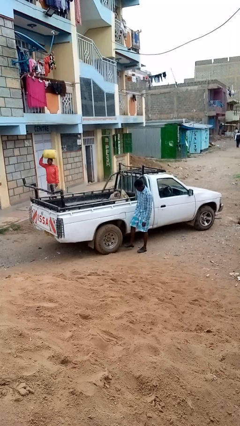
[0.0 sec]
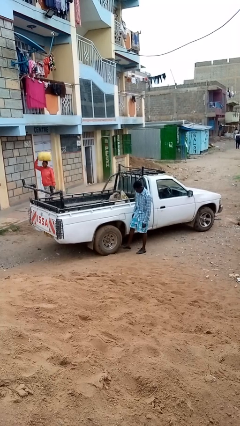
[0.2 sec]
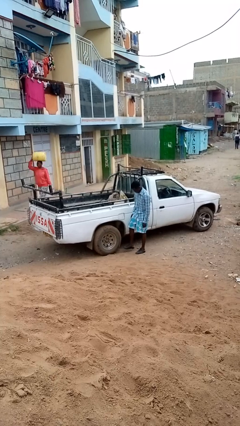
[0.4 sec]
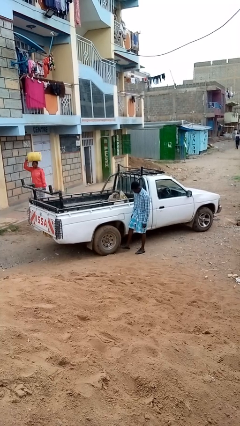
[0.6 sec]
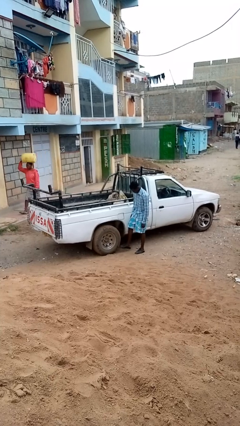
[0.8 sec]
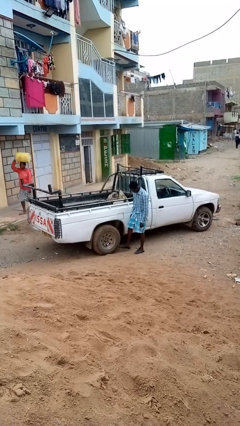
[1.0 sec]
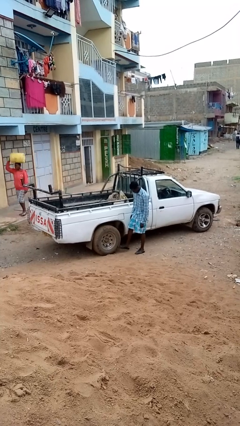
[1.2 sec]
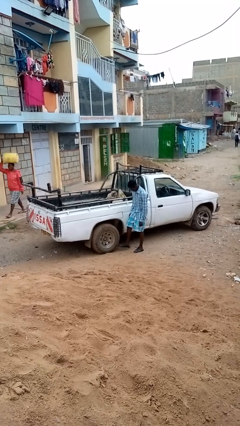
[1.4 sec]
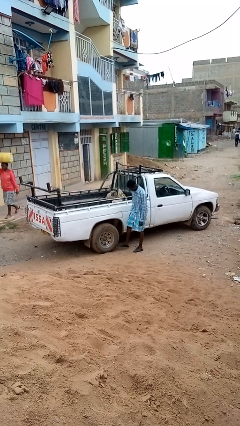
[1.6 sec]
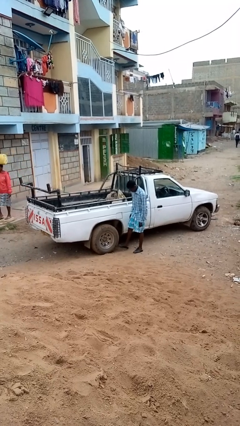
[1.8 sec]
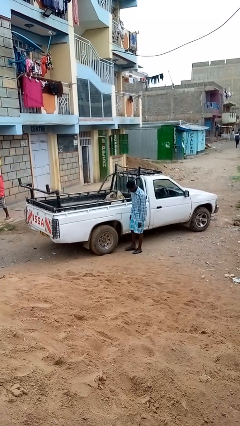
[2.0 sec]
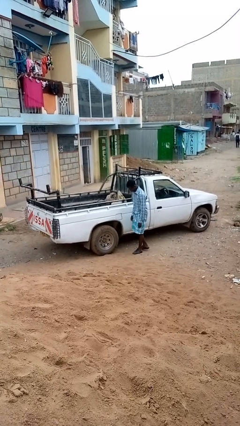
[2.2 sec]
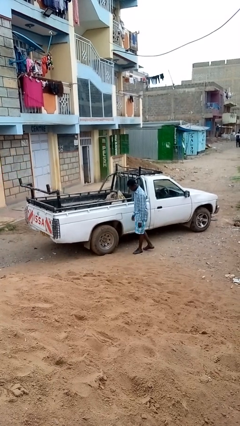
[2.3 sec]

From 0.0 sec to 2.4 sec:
person kicks car tires

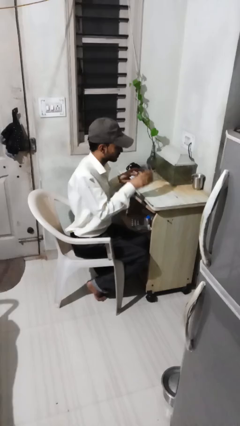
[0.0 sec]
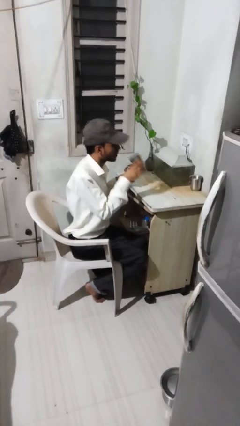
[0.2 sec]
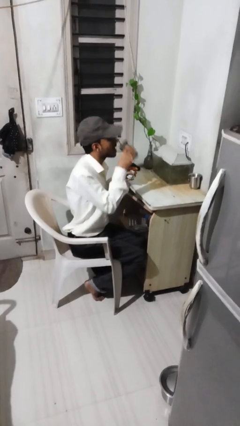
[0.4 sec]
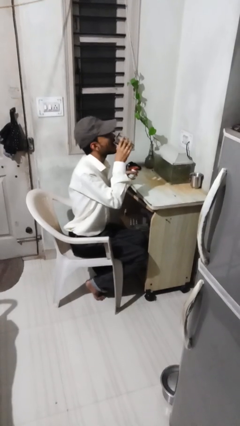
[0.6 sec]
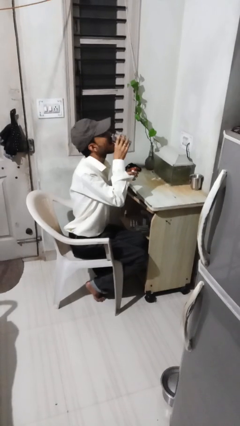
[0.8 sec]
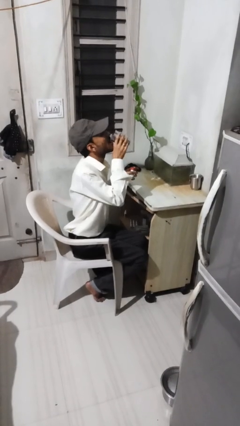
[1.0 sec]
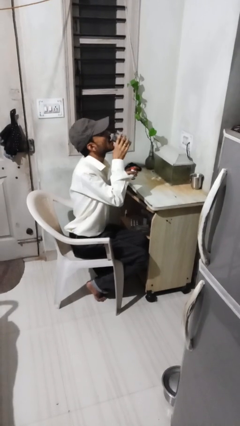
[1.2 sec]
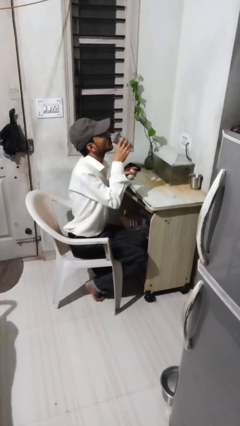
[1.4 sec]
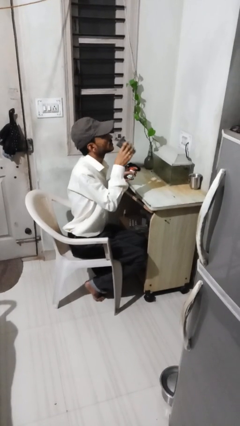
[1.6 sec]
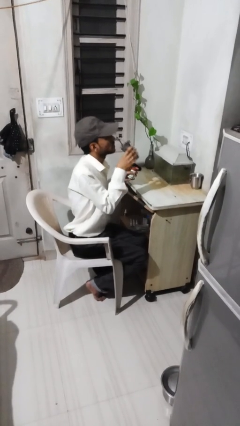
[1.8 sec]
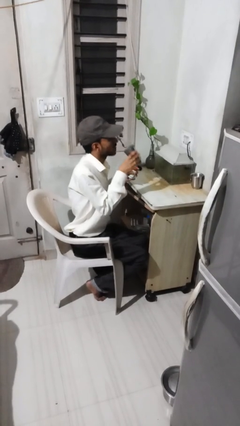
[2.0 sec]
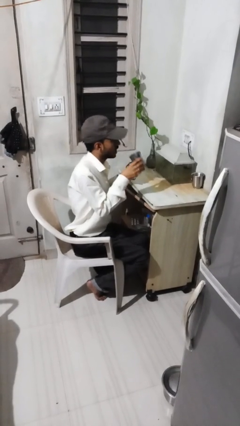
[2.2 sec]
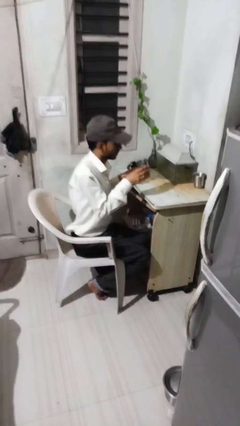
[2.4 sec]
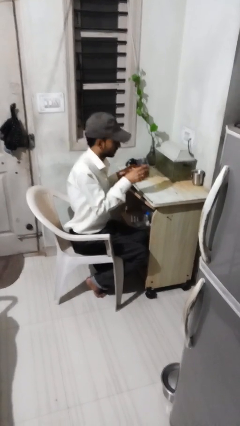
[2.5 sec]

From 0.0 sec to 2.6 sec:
person drinks from cup

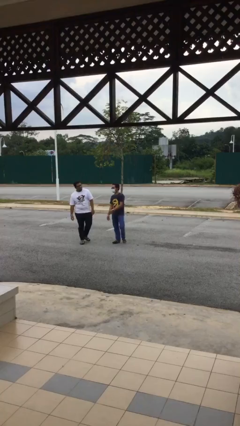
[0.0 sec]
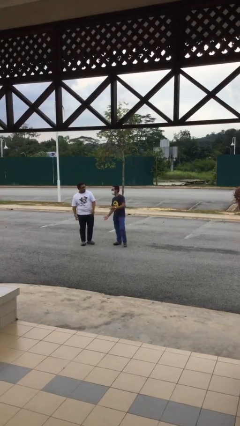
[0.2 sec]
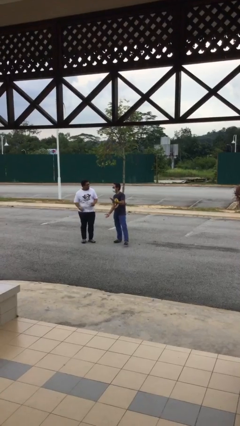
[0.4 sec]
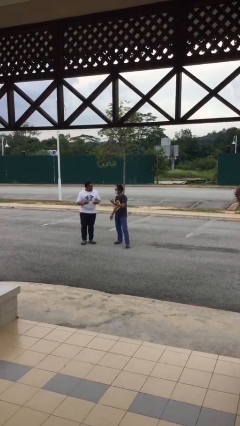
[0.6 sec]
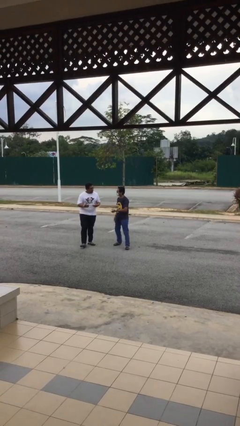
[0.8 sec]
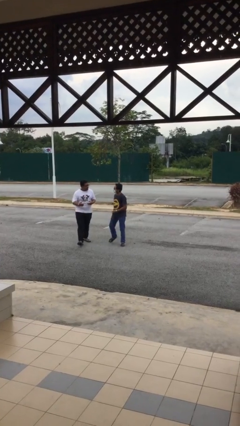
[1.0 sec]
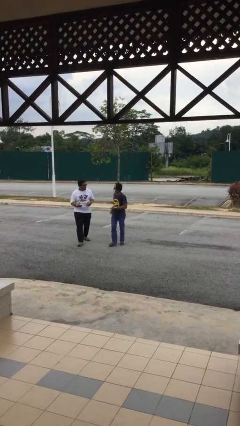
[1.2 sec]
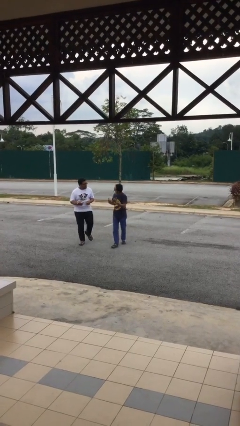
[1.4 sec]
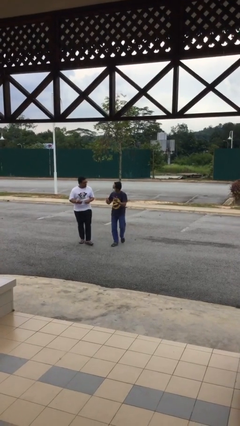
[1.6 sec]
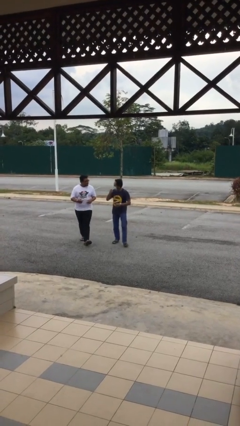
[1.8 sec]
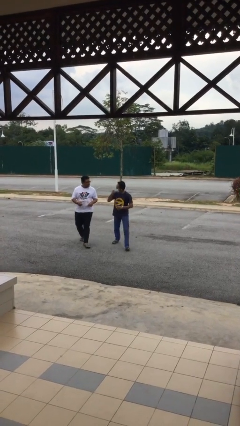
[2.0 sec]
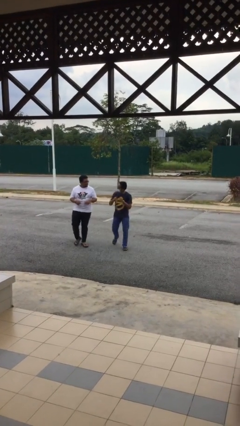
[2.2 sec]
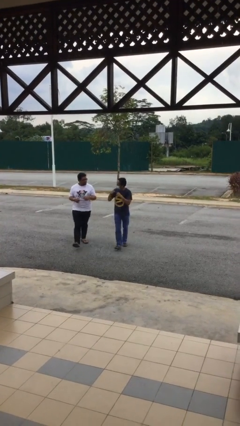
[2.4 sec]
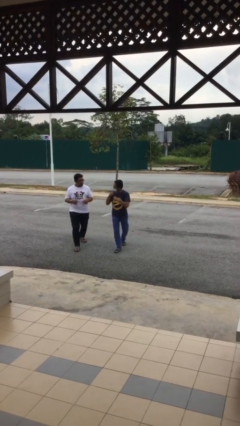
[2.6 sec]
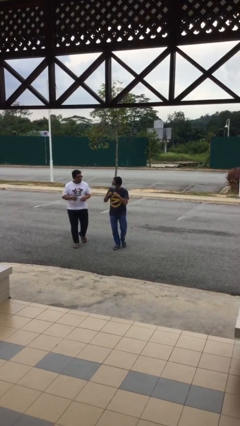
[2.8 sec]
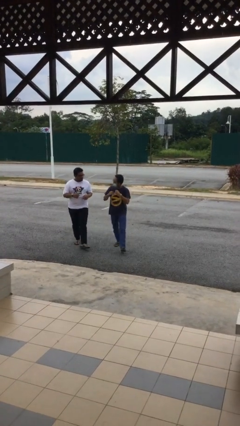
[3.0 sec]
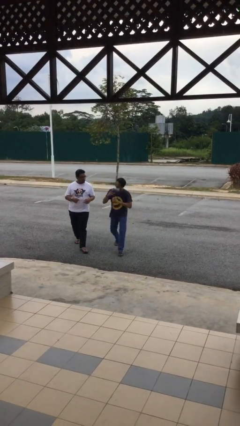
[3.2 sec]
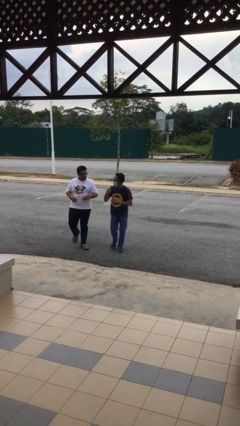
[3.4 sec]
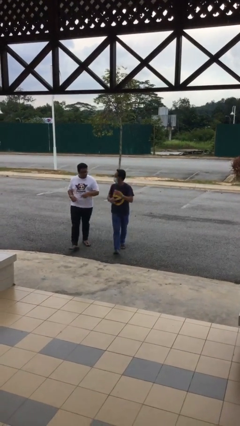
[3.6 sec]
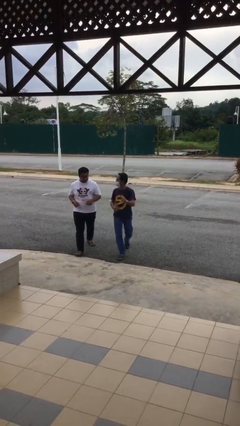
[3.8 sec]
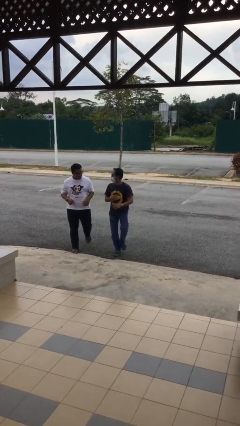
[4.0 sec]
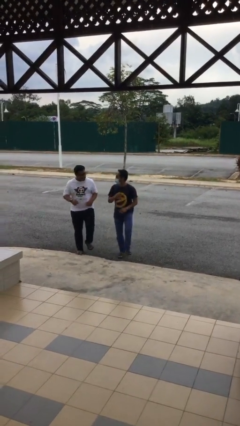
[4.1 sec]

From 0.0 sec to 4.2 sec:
person talks to person

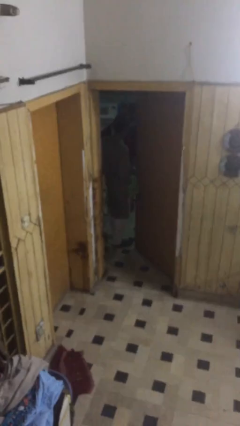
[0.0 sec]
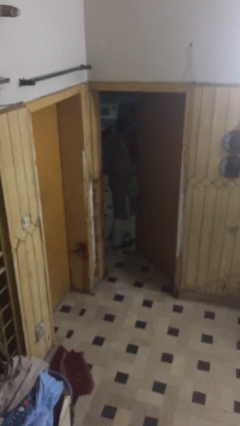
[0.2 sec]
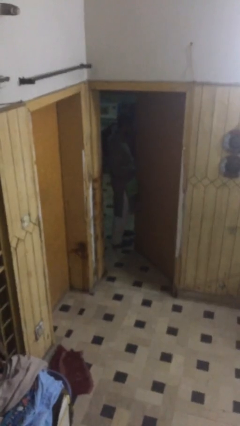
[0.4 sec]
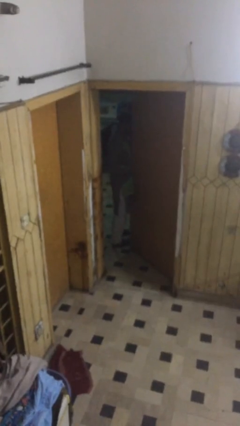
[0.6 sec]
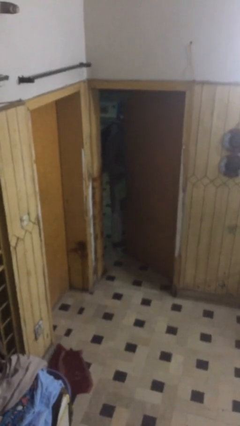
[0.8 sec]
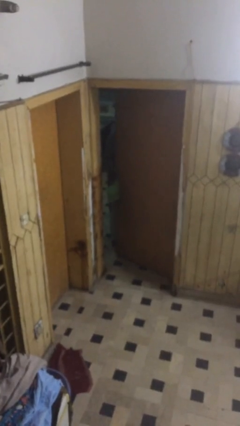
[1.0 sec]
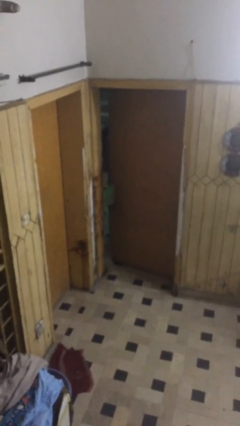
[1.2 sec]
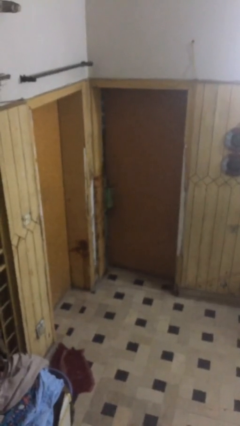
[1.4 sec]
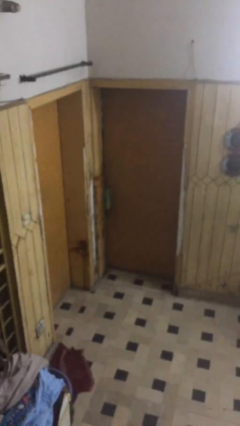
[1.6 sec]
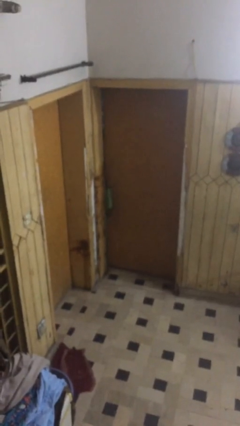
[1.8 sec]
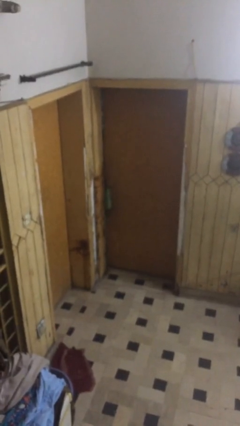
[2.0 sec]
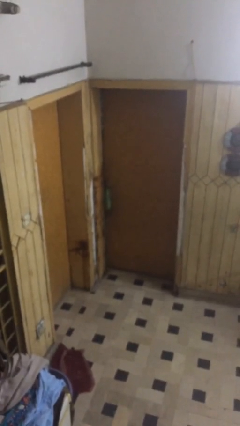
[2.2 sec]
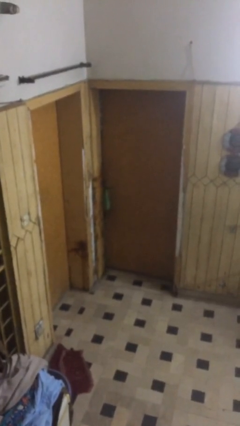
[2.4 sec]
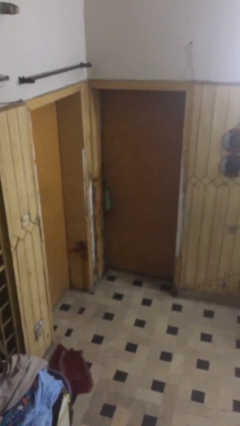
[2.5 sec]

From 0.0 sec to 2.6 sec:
person closes facility door

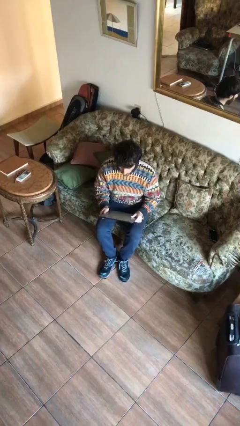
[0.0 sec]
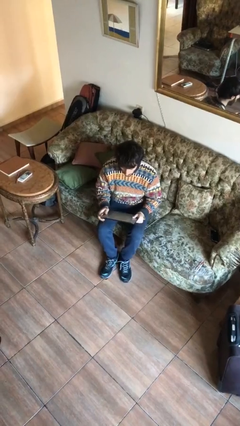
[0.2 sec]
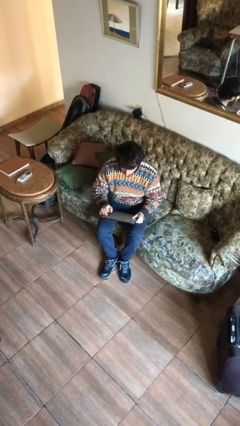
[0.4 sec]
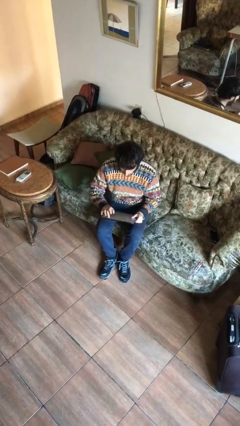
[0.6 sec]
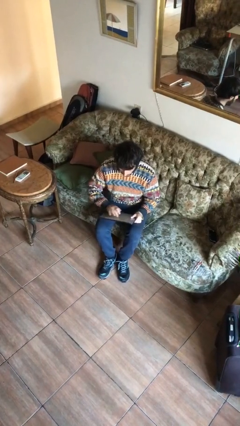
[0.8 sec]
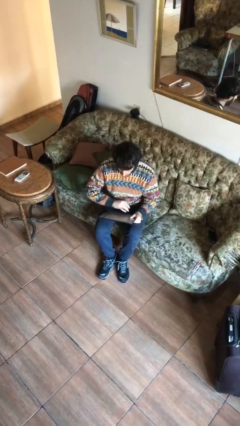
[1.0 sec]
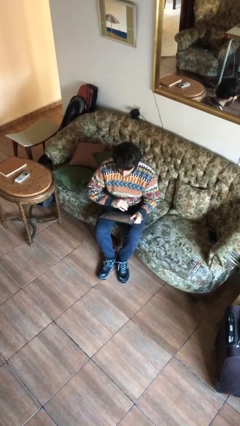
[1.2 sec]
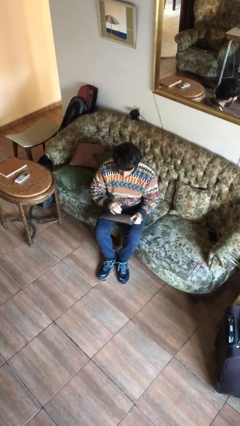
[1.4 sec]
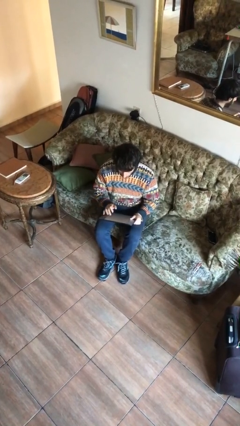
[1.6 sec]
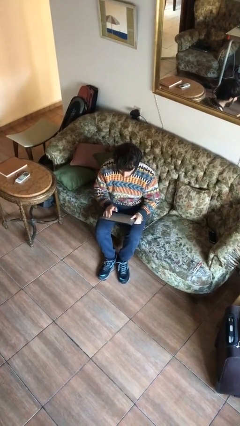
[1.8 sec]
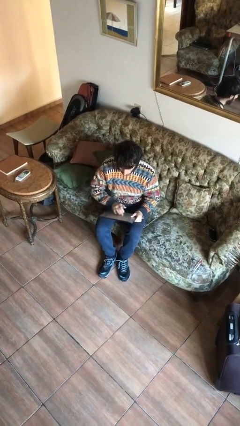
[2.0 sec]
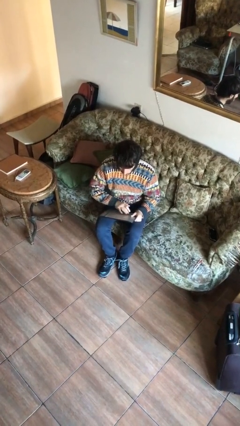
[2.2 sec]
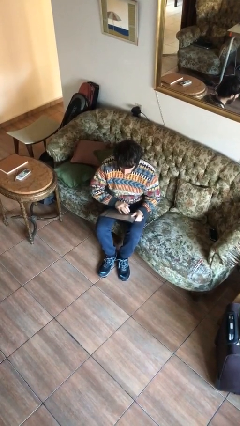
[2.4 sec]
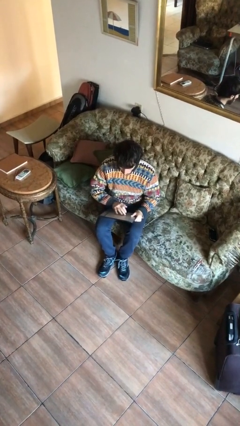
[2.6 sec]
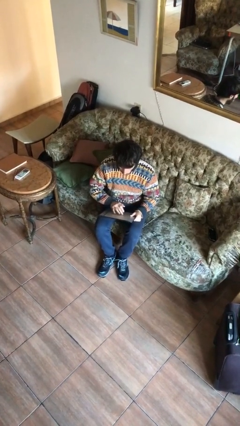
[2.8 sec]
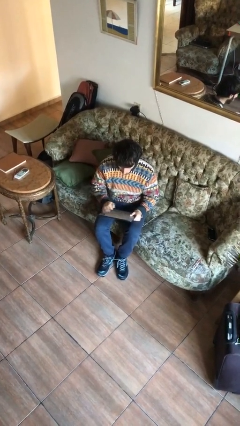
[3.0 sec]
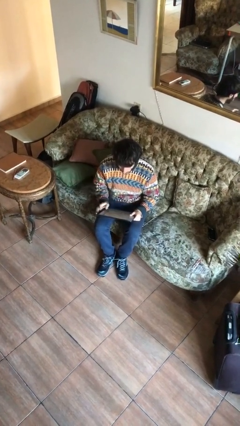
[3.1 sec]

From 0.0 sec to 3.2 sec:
person interacts with tablet

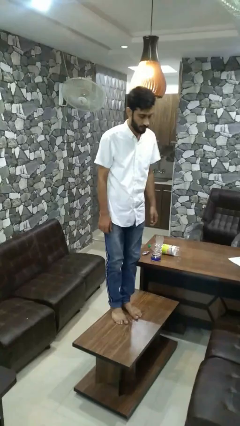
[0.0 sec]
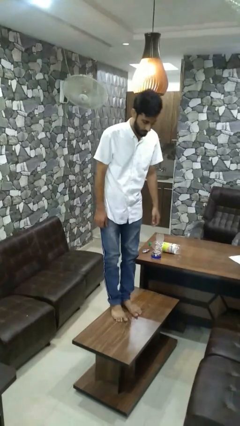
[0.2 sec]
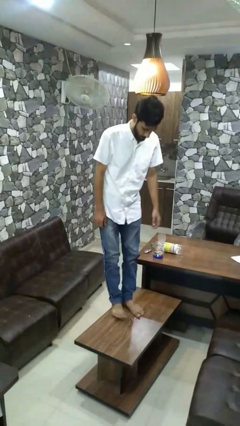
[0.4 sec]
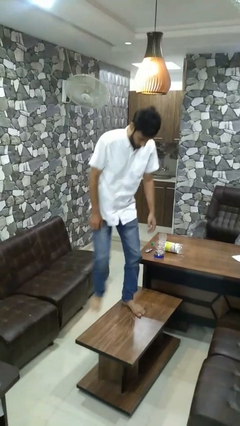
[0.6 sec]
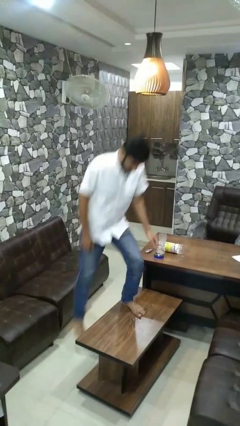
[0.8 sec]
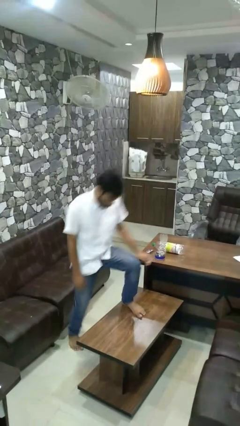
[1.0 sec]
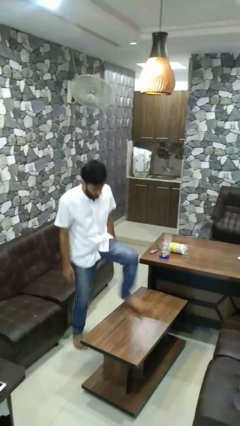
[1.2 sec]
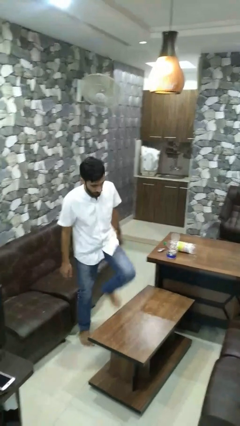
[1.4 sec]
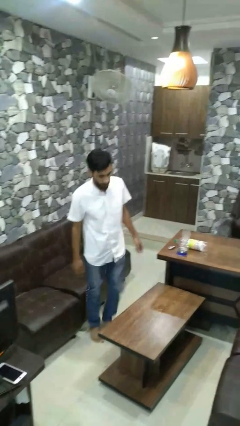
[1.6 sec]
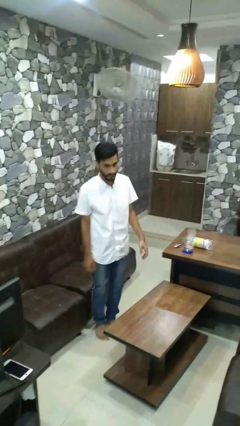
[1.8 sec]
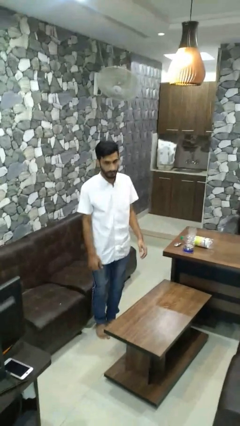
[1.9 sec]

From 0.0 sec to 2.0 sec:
person climbs off table

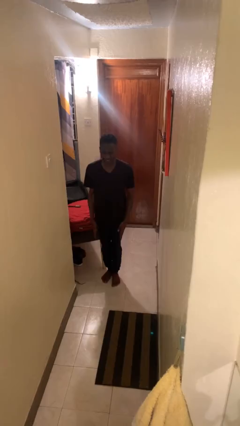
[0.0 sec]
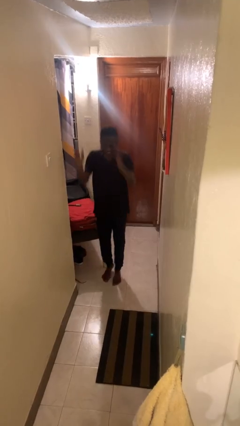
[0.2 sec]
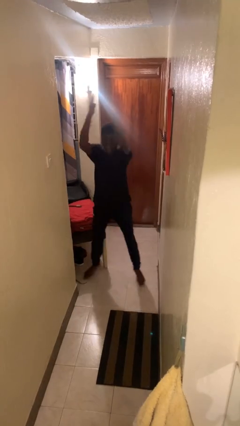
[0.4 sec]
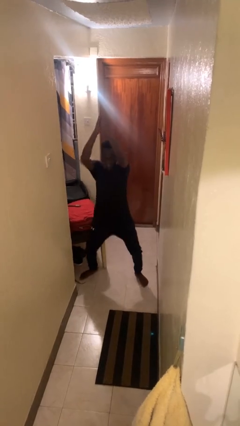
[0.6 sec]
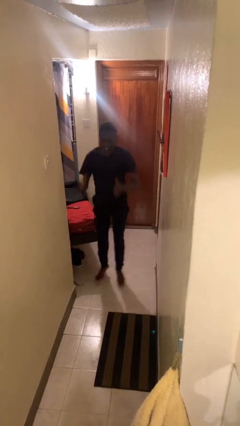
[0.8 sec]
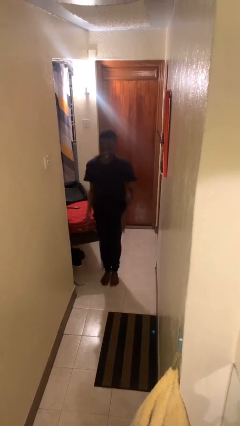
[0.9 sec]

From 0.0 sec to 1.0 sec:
person exercises with jumping jacks
